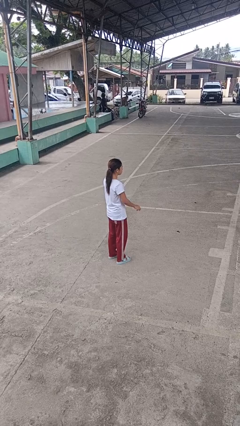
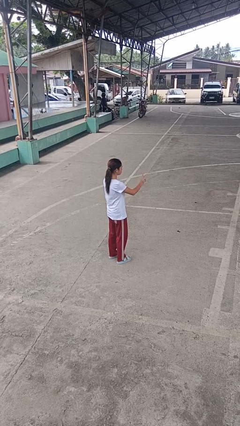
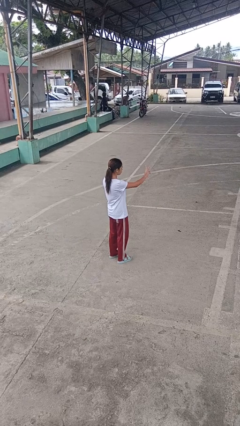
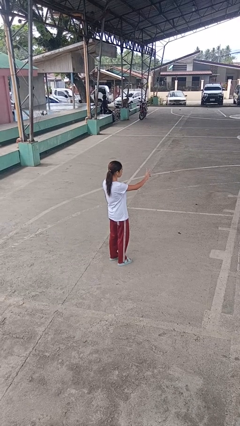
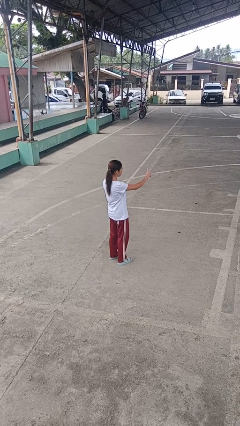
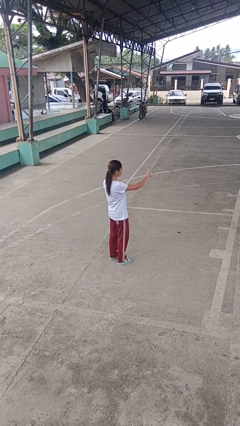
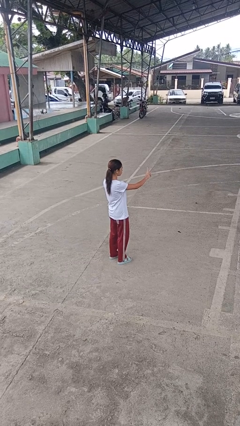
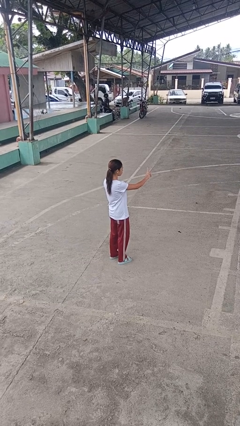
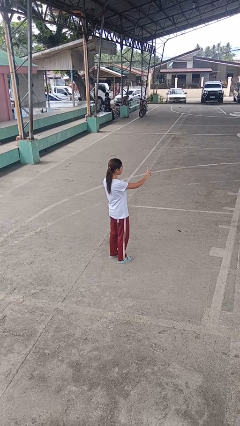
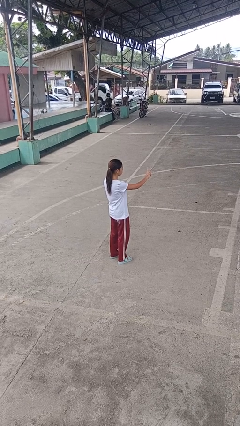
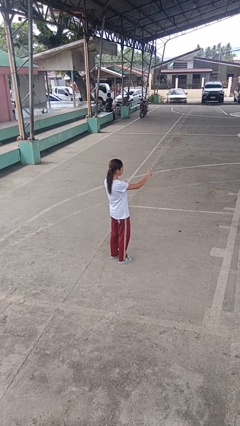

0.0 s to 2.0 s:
person gestures peace

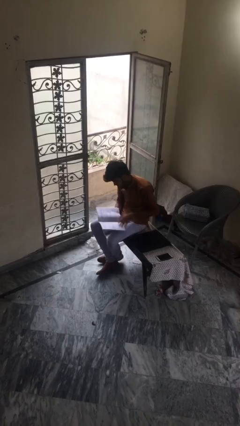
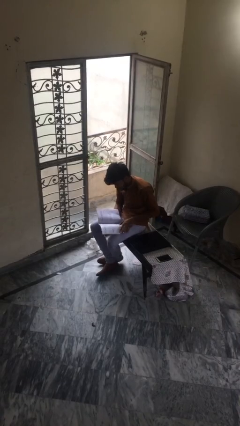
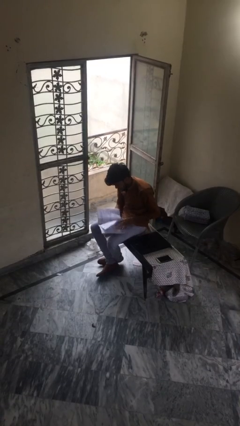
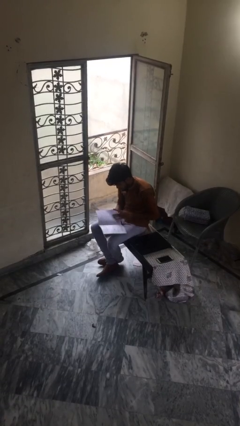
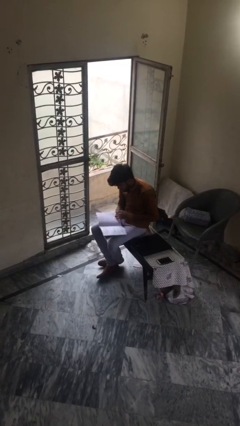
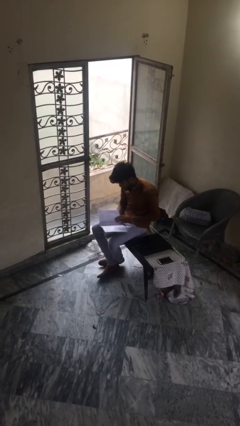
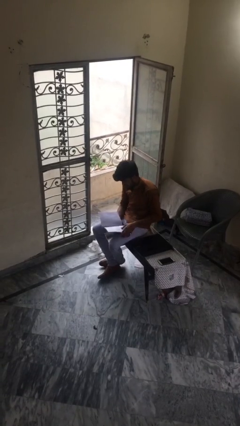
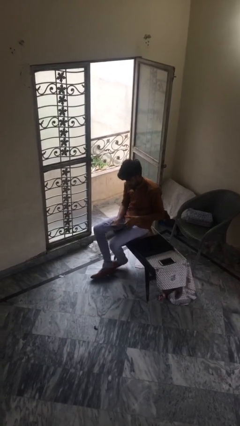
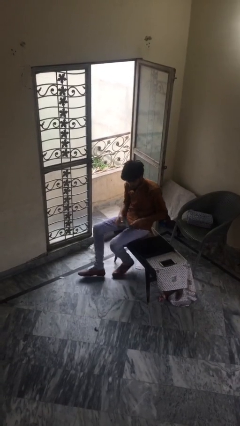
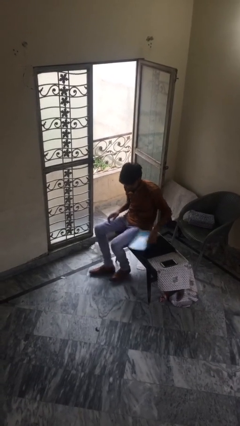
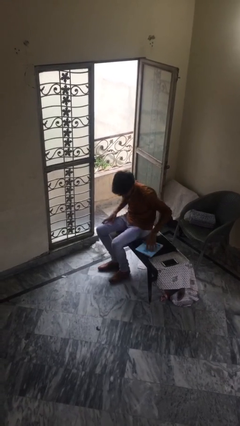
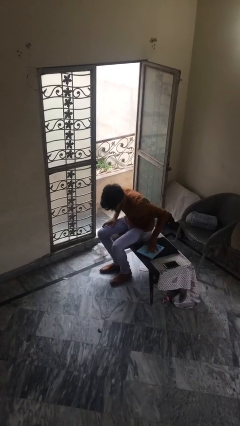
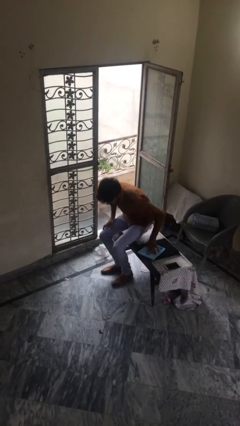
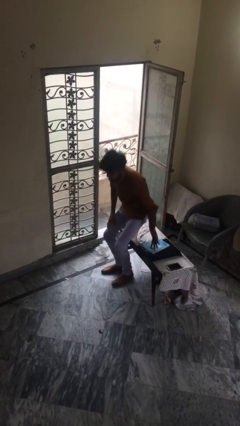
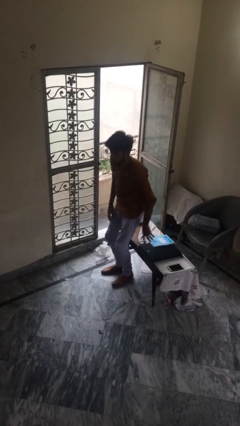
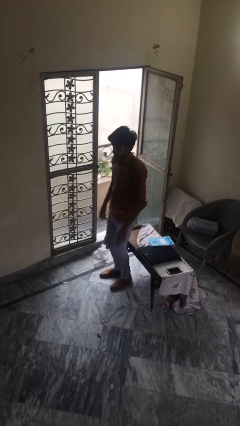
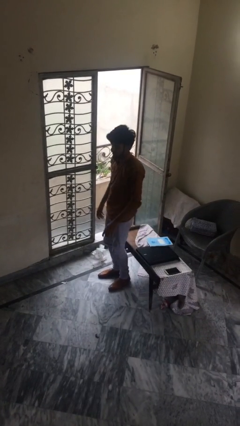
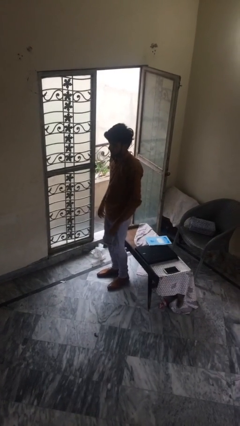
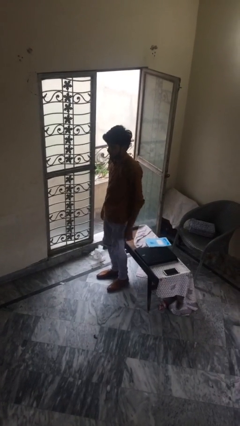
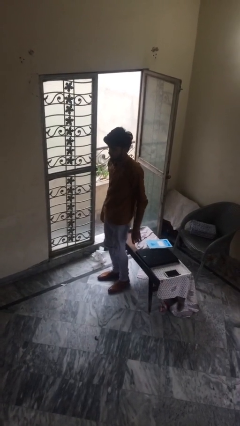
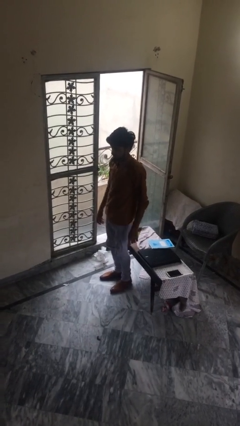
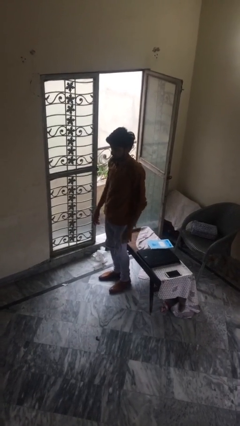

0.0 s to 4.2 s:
person stands up

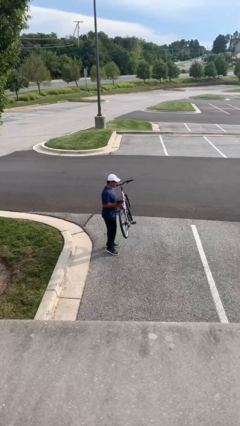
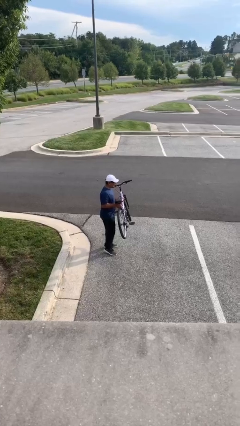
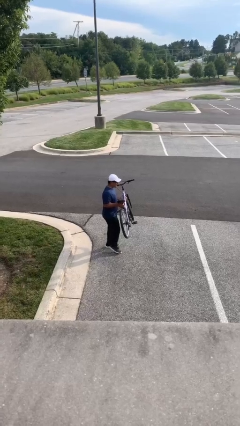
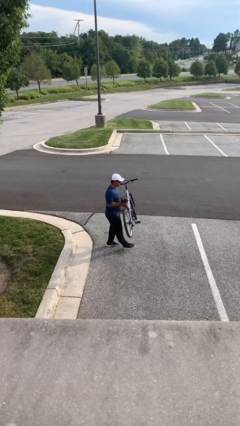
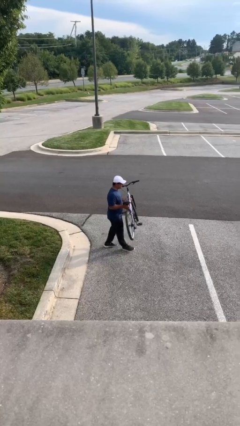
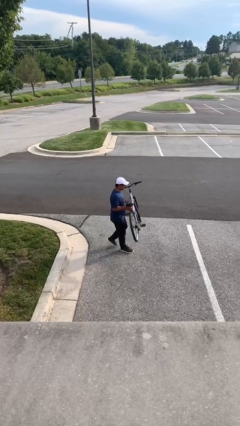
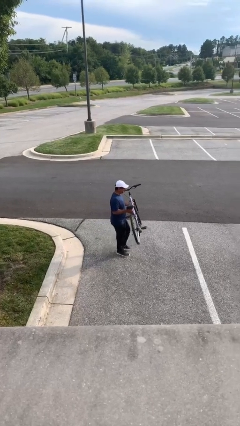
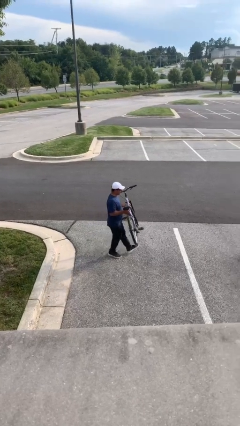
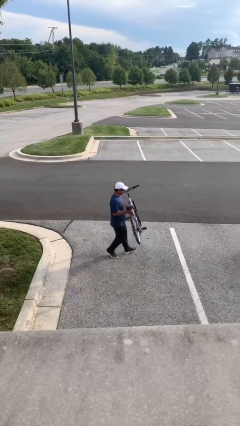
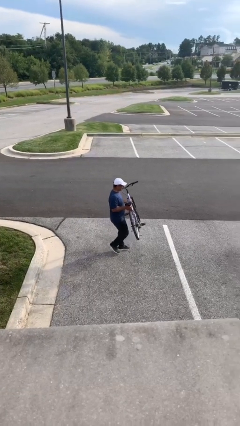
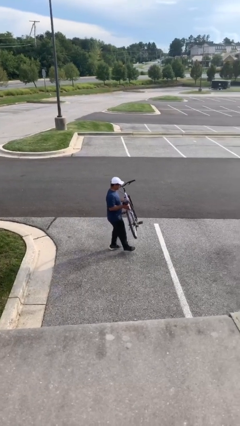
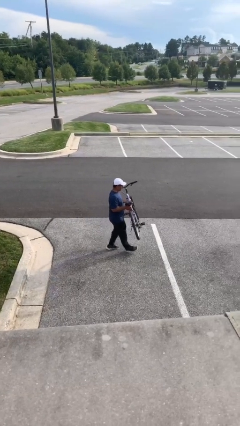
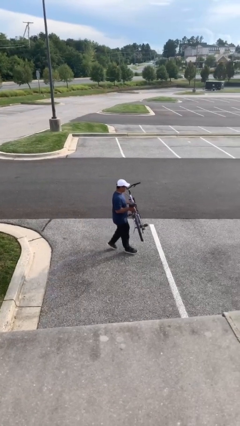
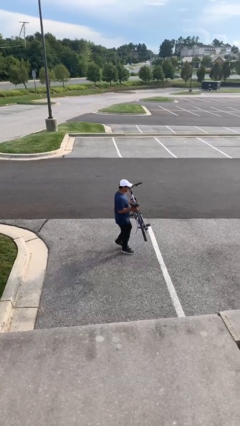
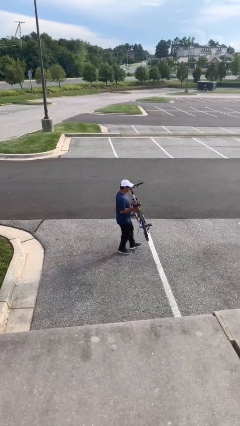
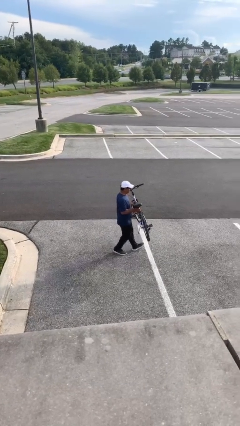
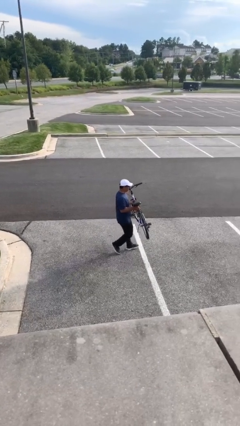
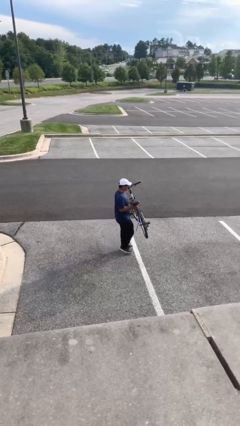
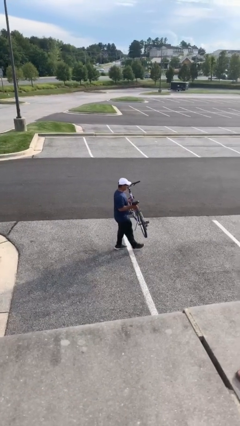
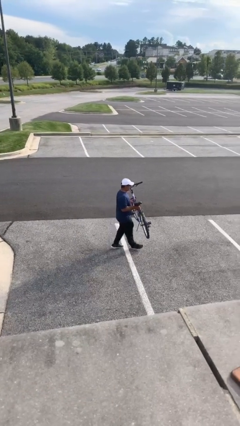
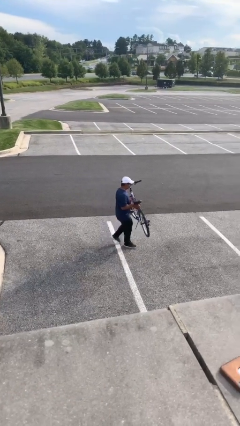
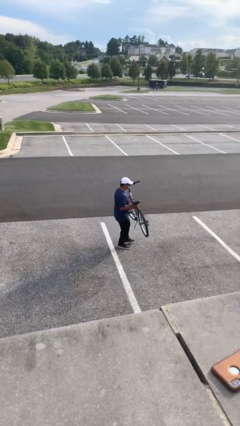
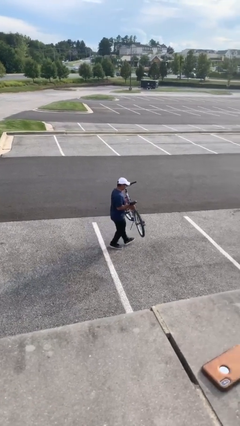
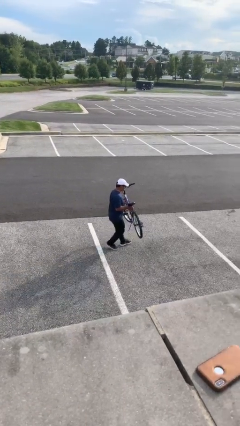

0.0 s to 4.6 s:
person carries heavy object

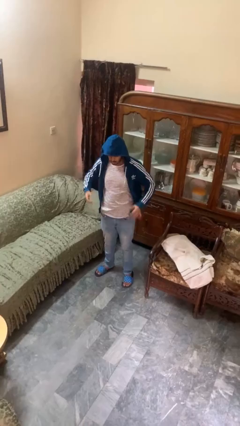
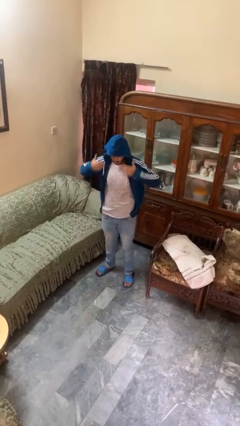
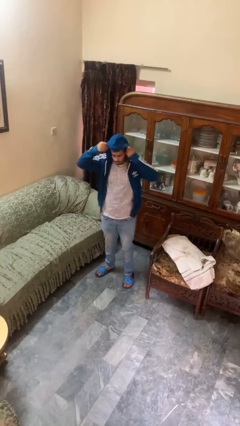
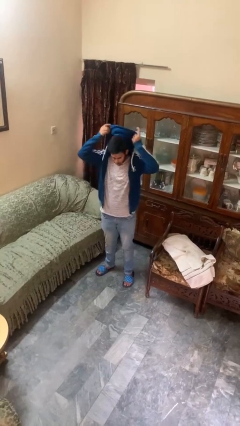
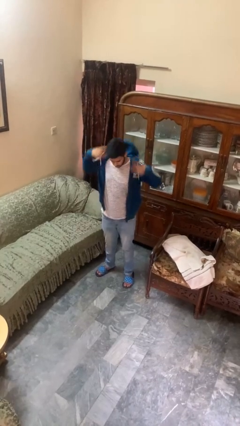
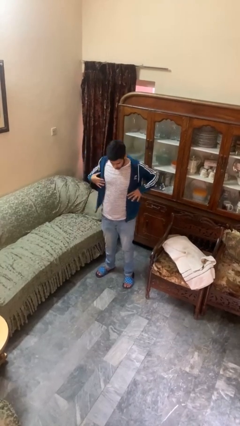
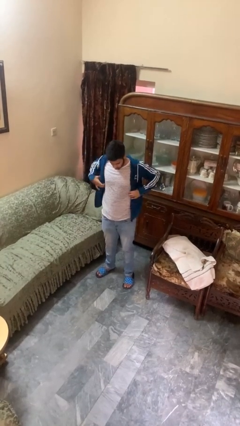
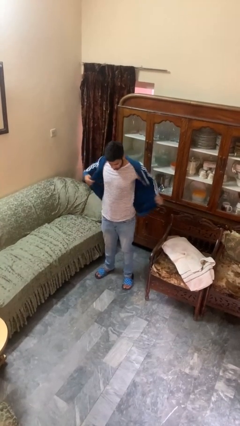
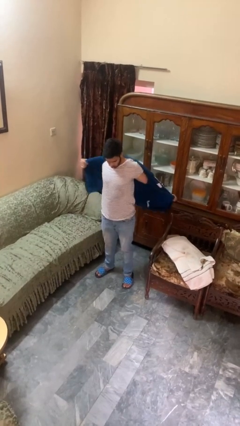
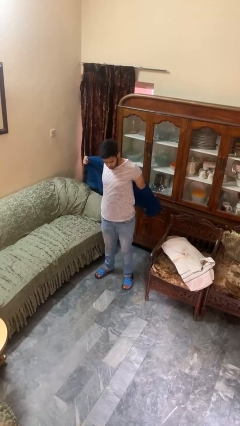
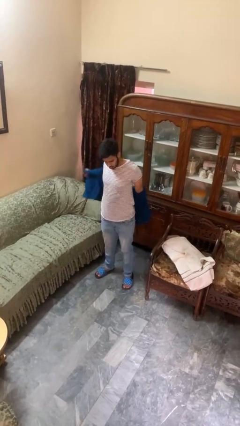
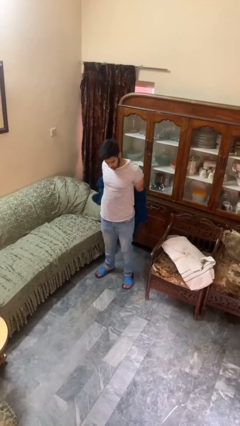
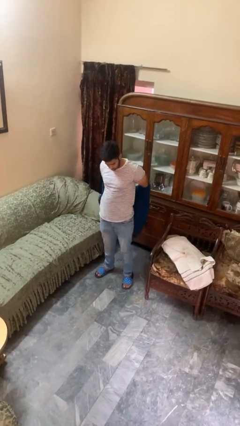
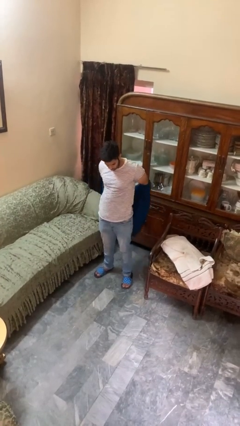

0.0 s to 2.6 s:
person takes off hoodie

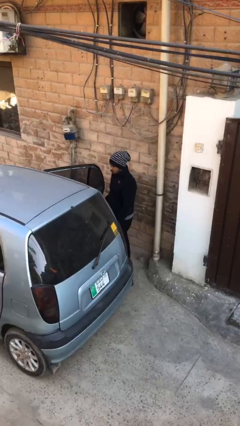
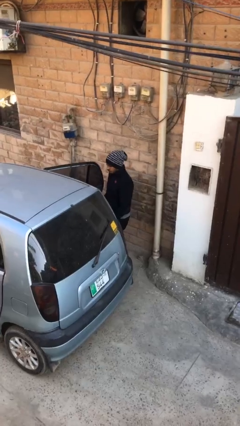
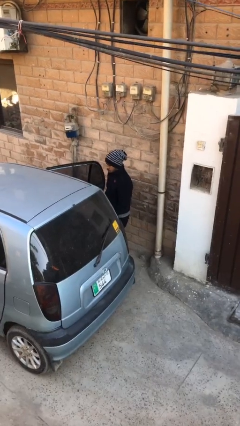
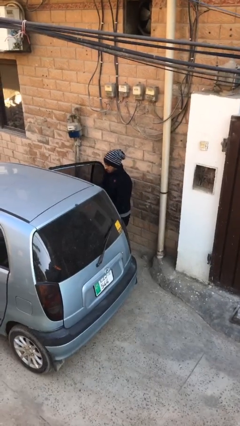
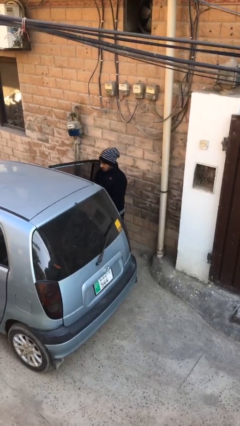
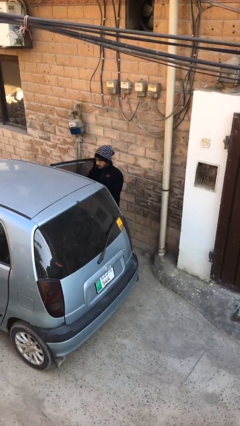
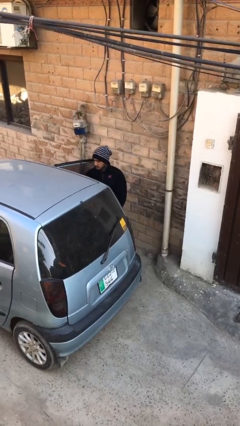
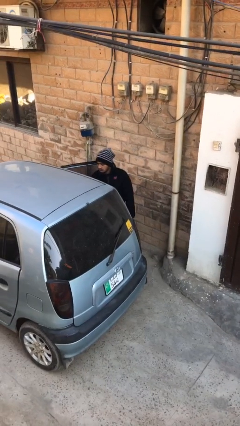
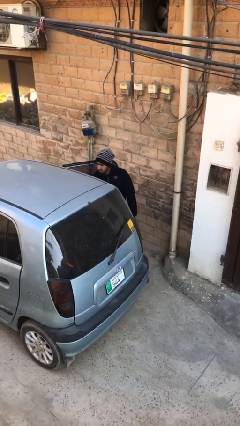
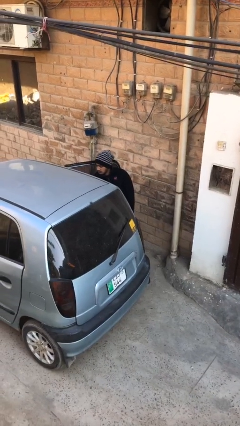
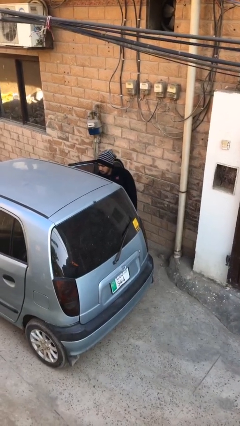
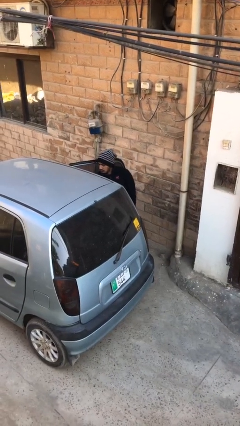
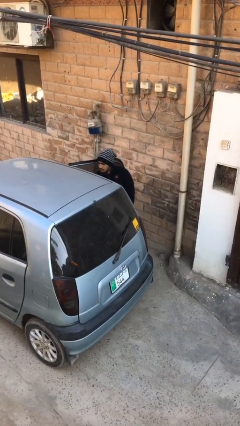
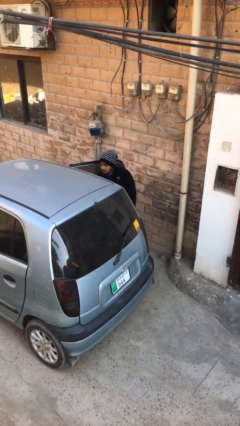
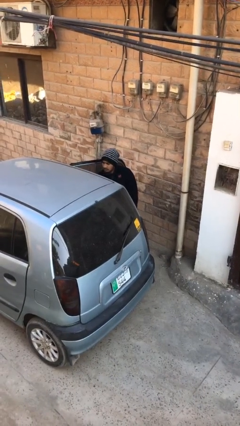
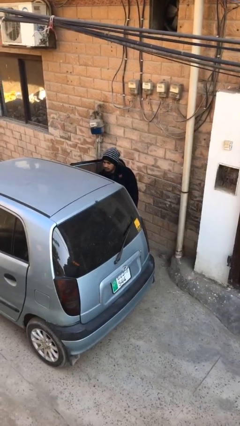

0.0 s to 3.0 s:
person loads car

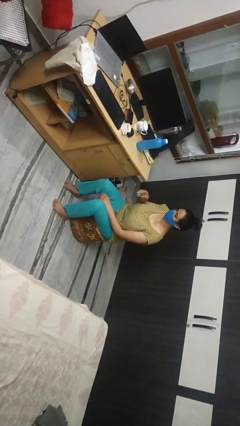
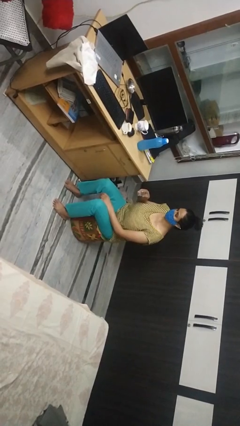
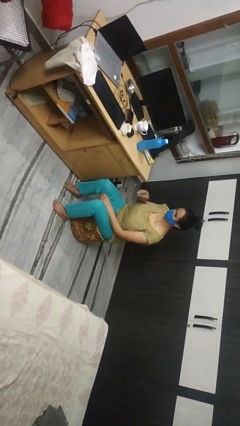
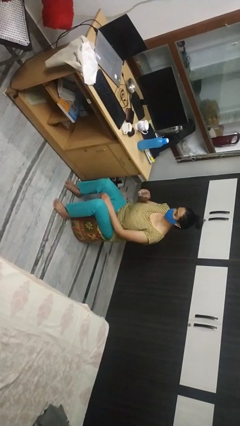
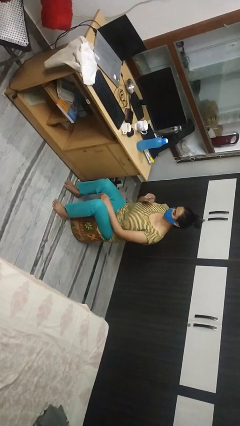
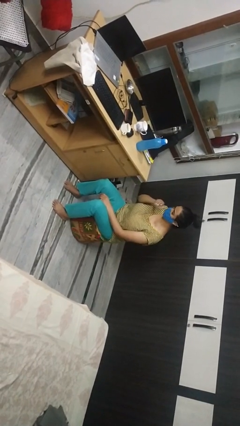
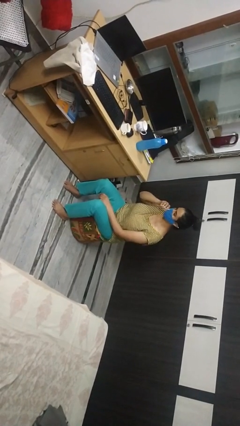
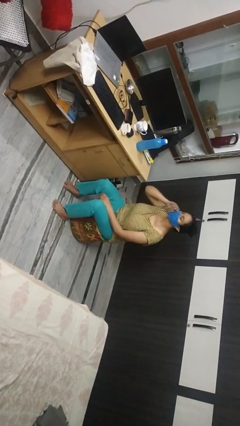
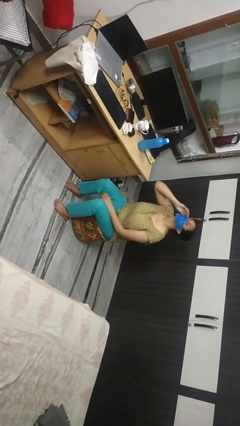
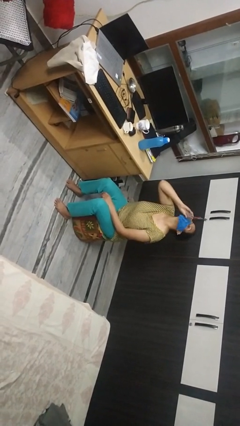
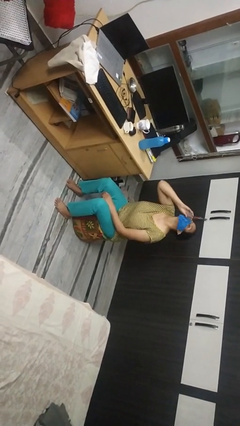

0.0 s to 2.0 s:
person drinks from shotglass
